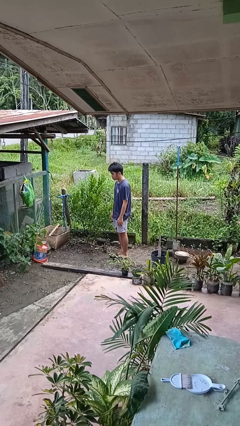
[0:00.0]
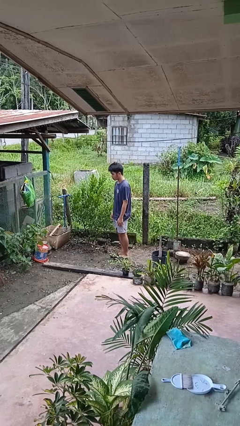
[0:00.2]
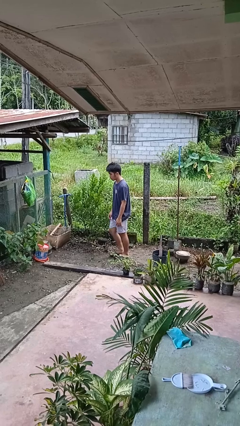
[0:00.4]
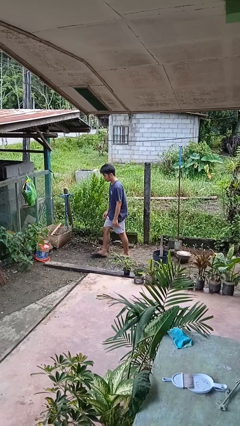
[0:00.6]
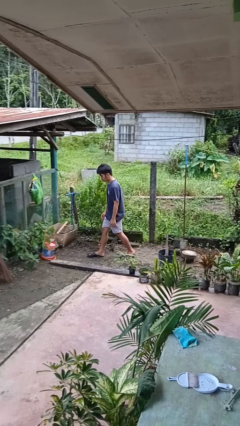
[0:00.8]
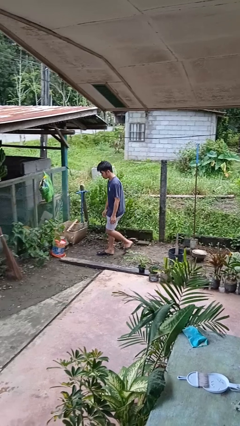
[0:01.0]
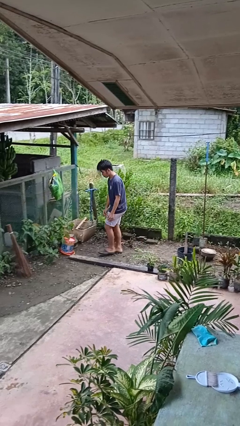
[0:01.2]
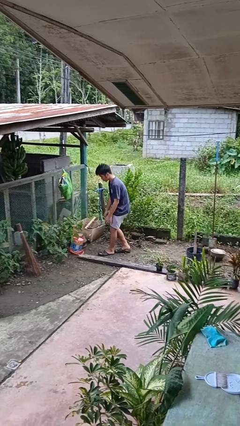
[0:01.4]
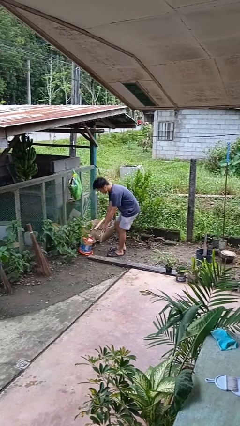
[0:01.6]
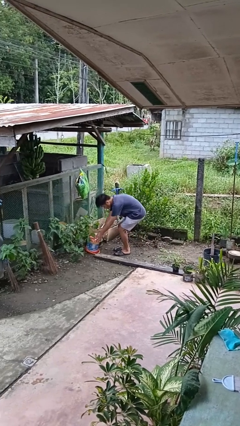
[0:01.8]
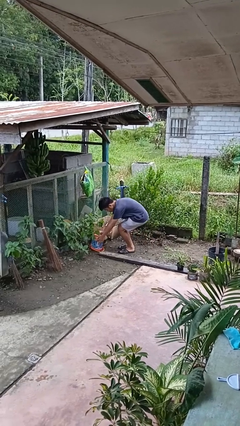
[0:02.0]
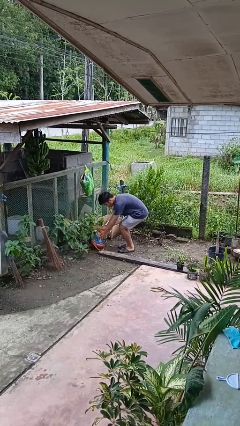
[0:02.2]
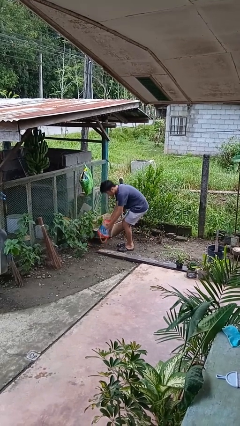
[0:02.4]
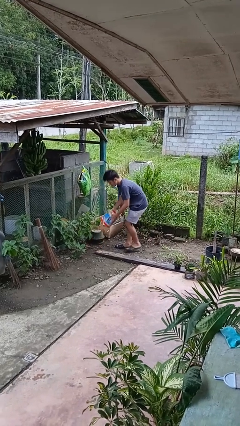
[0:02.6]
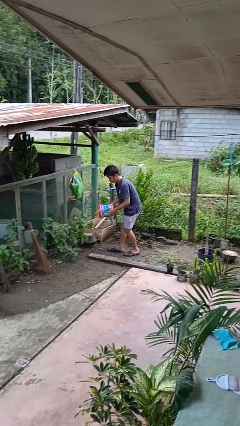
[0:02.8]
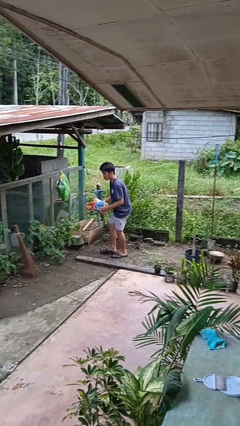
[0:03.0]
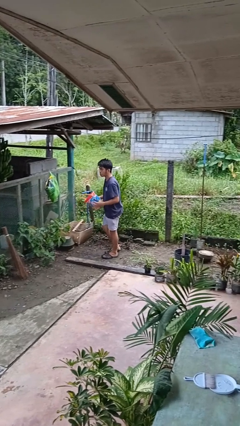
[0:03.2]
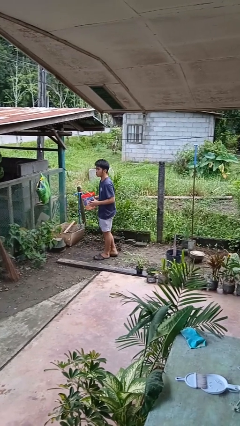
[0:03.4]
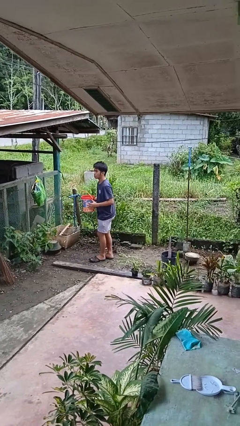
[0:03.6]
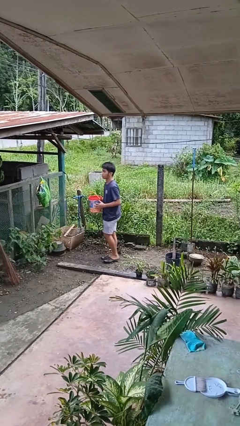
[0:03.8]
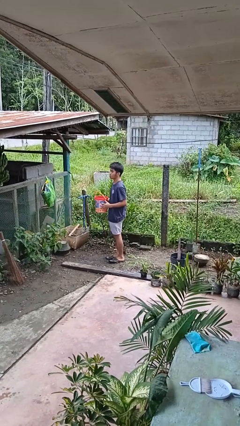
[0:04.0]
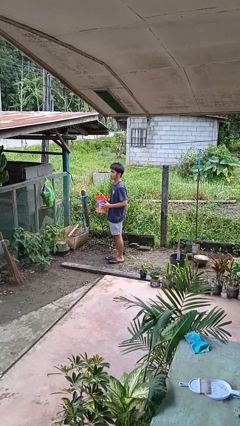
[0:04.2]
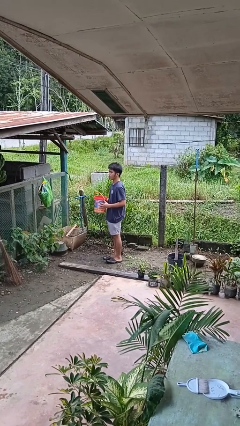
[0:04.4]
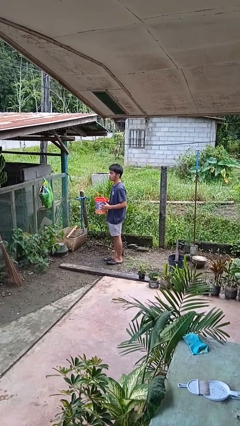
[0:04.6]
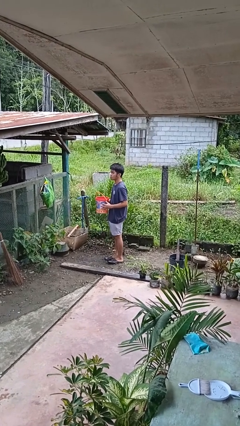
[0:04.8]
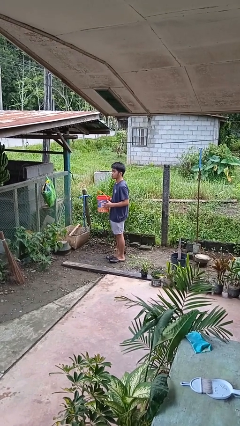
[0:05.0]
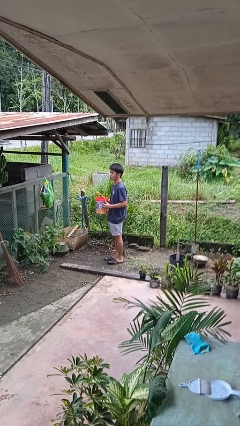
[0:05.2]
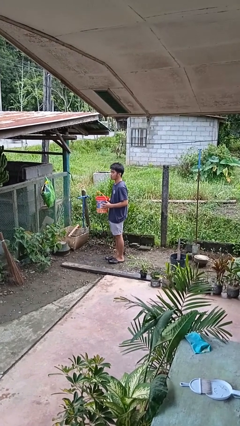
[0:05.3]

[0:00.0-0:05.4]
person picks up object from floor

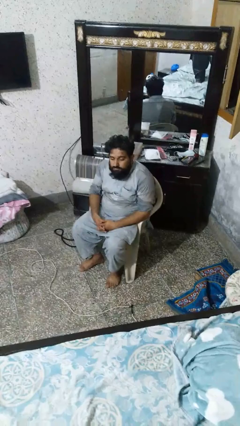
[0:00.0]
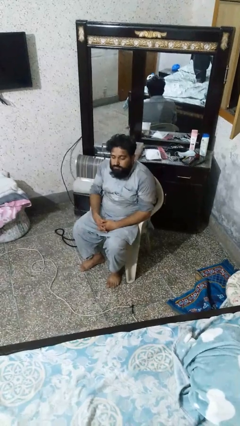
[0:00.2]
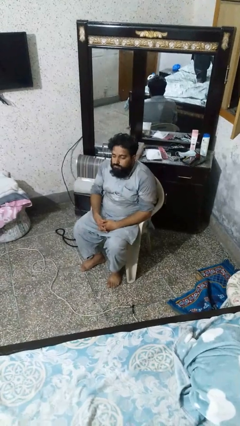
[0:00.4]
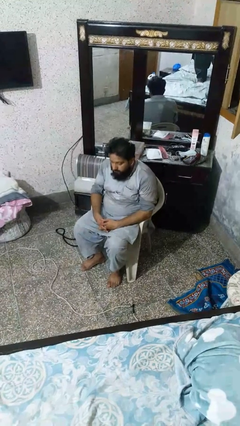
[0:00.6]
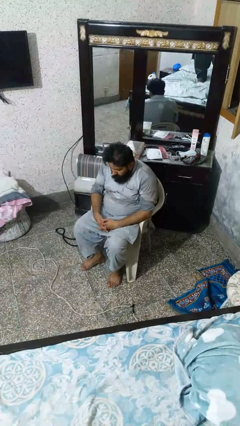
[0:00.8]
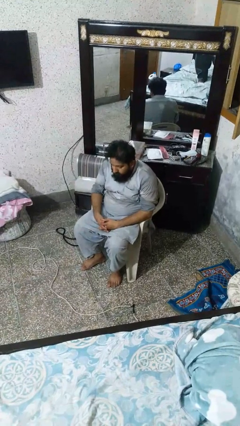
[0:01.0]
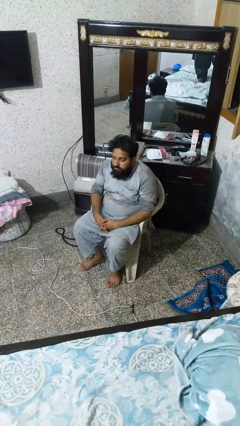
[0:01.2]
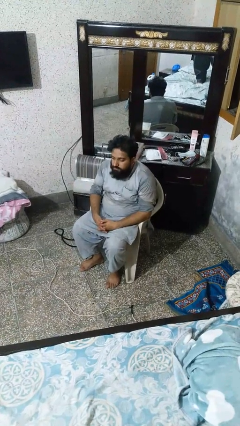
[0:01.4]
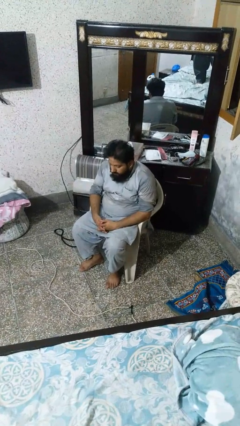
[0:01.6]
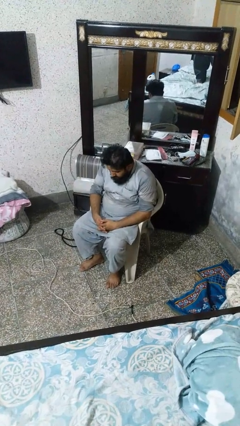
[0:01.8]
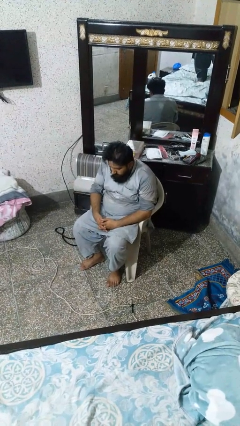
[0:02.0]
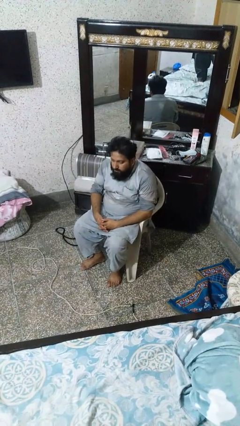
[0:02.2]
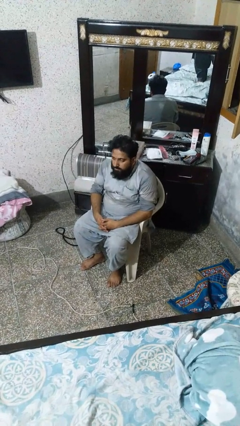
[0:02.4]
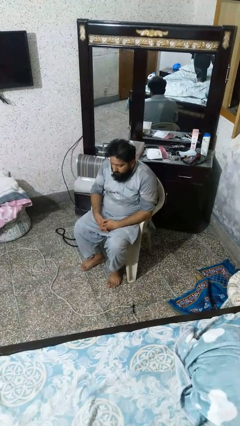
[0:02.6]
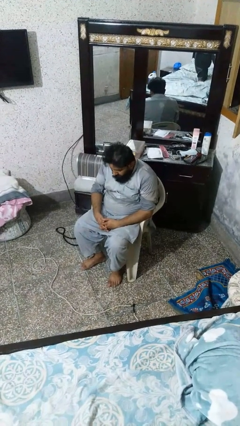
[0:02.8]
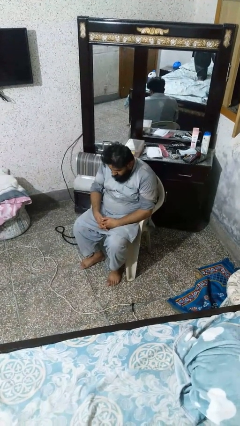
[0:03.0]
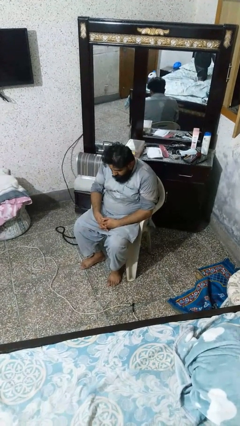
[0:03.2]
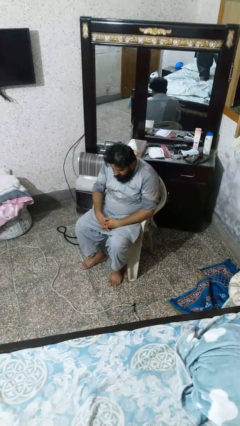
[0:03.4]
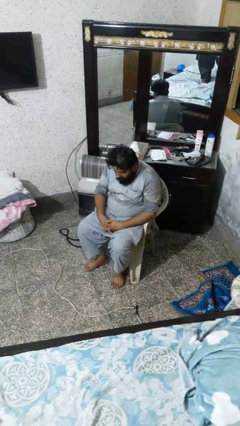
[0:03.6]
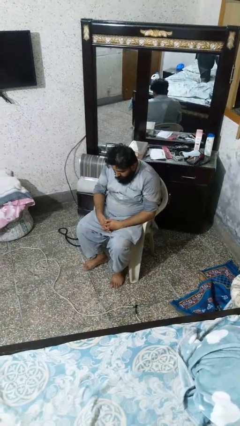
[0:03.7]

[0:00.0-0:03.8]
person nods head

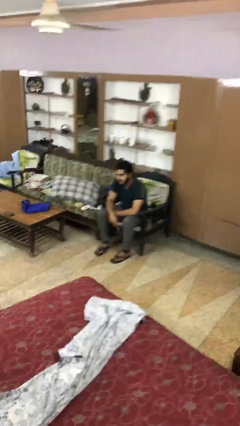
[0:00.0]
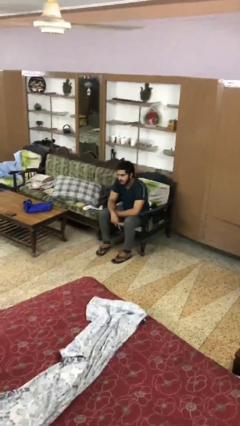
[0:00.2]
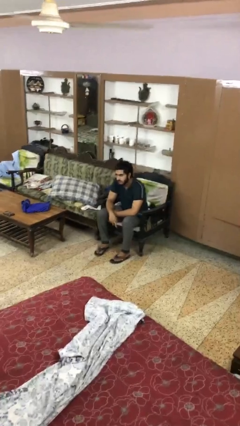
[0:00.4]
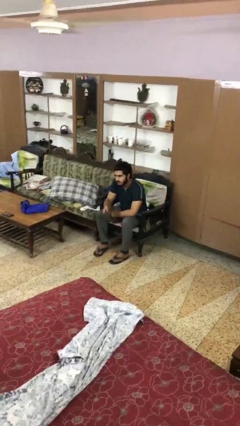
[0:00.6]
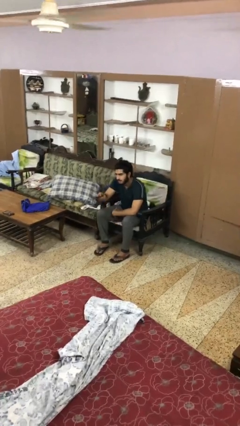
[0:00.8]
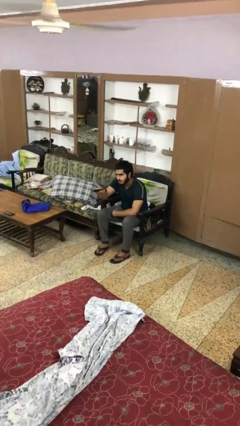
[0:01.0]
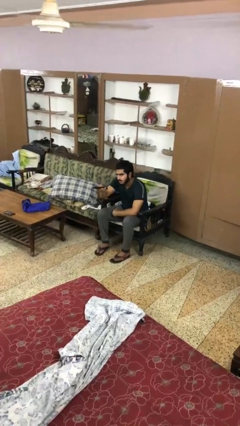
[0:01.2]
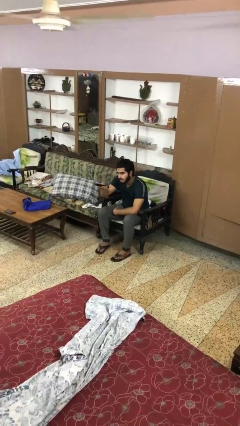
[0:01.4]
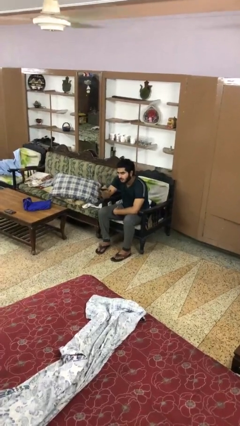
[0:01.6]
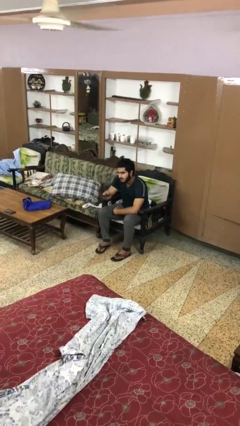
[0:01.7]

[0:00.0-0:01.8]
person uses television remote

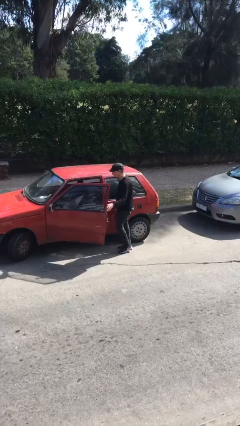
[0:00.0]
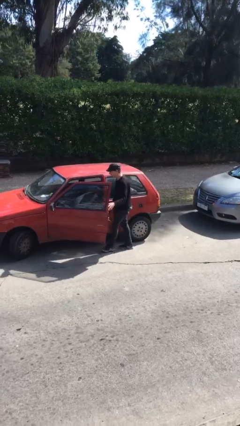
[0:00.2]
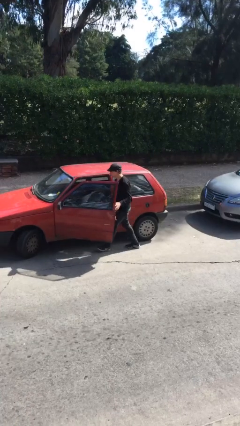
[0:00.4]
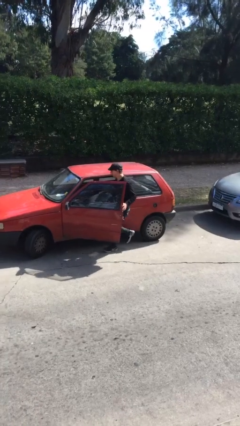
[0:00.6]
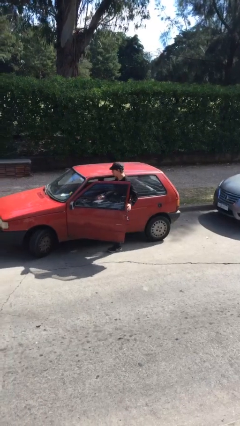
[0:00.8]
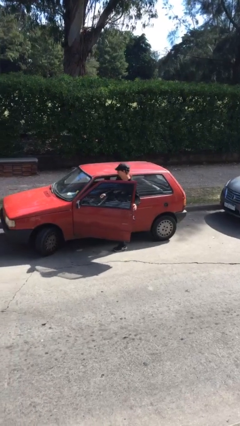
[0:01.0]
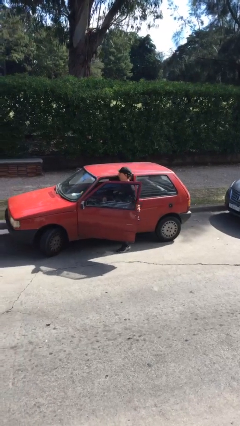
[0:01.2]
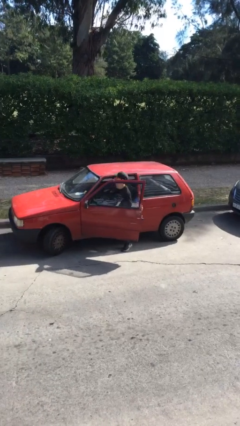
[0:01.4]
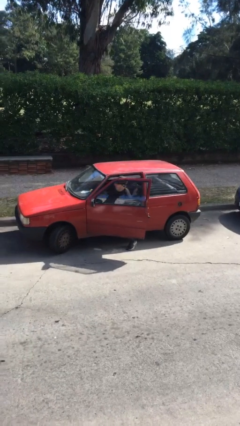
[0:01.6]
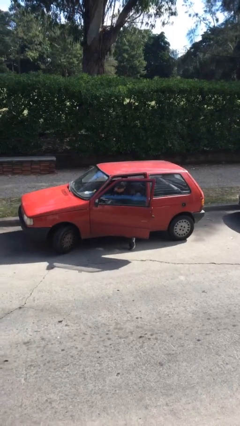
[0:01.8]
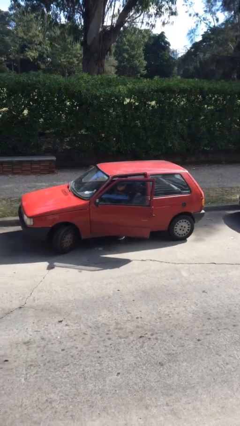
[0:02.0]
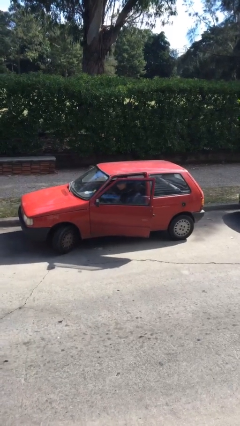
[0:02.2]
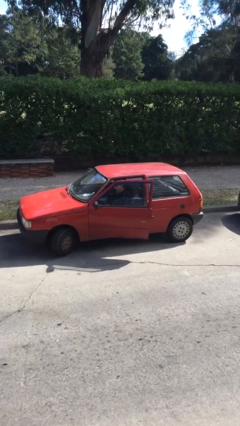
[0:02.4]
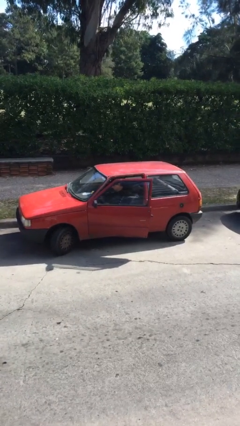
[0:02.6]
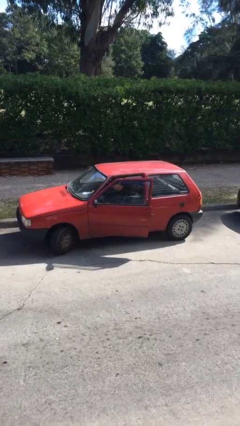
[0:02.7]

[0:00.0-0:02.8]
person enters car

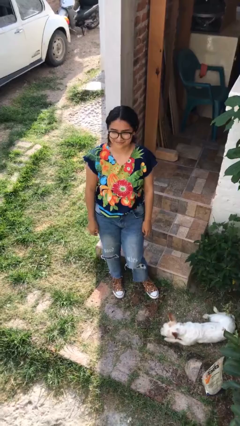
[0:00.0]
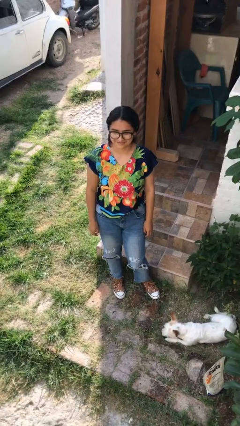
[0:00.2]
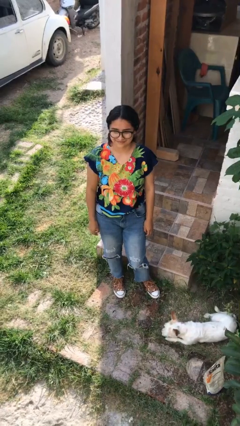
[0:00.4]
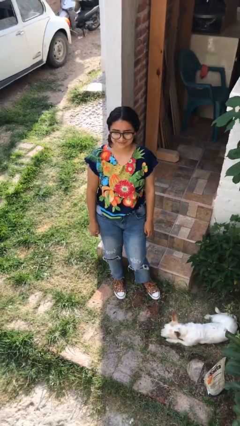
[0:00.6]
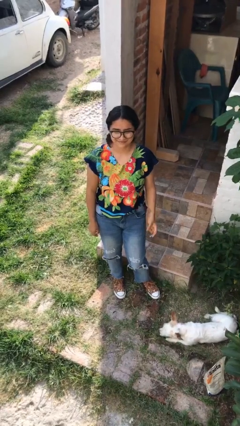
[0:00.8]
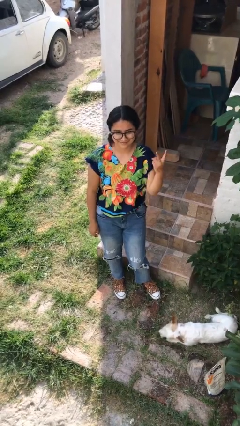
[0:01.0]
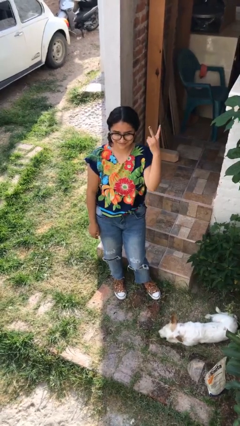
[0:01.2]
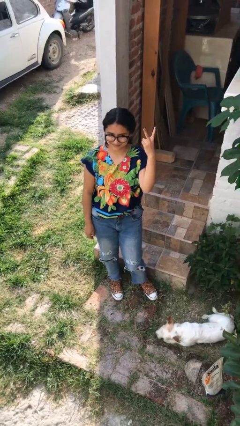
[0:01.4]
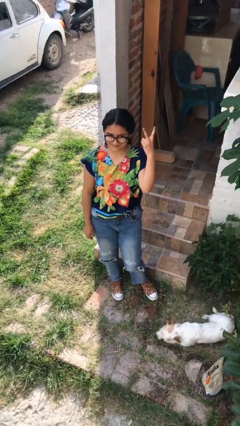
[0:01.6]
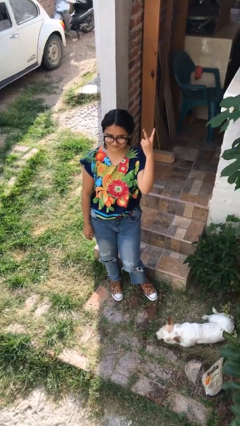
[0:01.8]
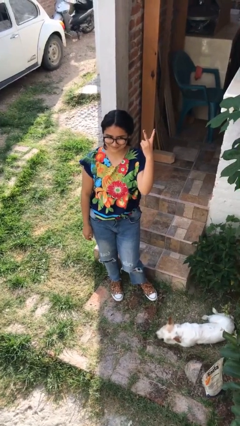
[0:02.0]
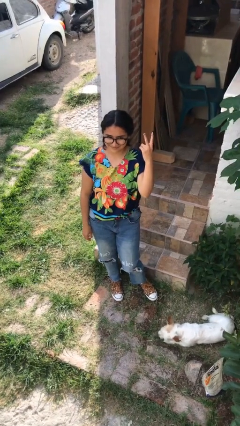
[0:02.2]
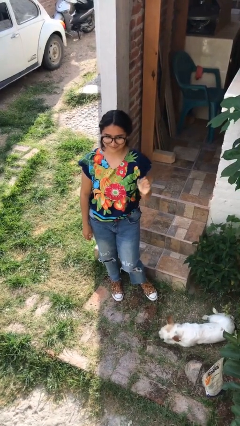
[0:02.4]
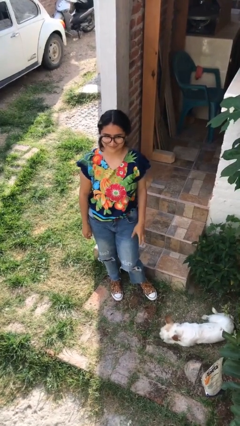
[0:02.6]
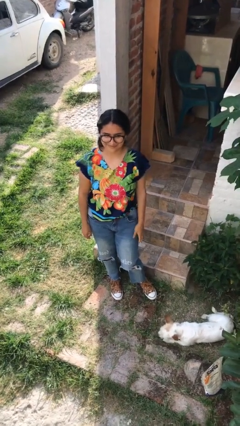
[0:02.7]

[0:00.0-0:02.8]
person gestures peace

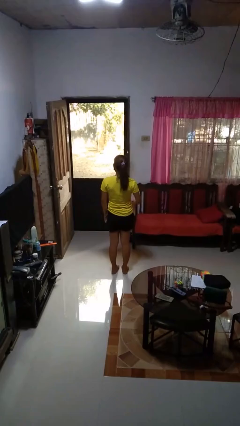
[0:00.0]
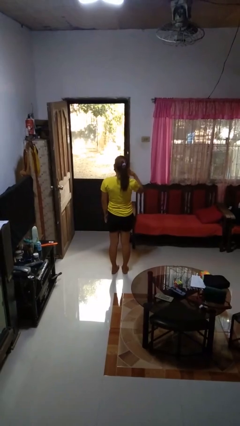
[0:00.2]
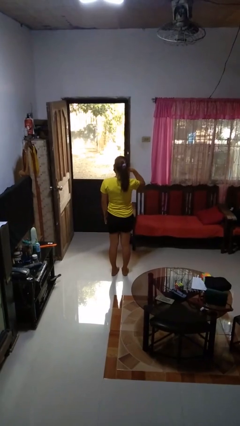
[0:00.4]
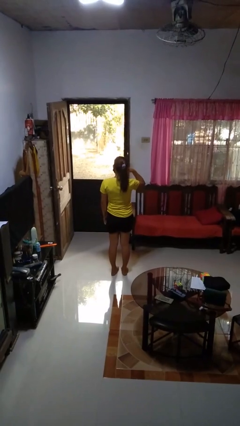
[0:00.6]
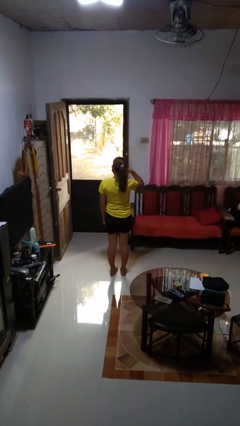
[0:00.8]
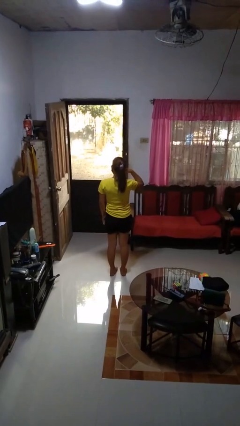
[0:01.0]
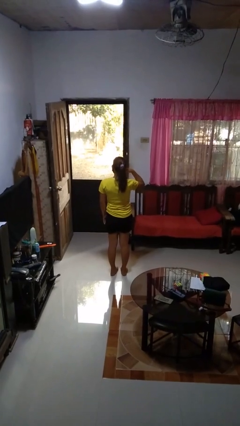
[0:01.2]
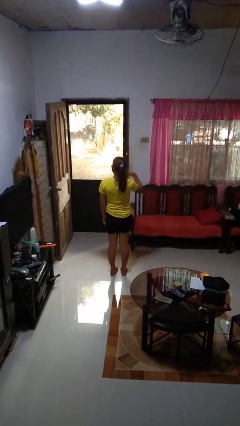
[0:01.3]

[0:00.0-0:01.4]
person gestures call me
